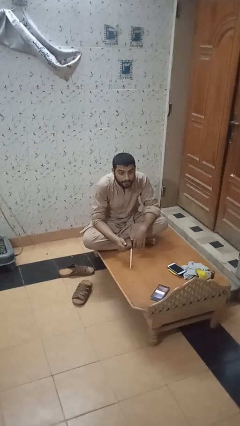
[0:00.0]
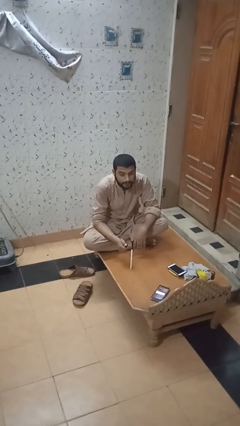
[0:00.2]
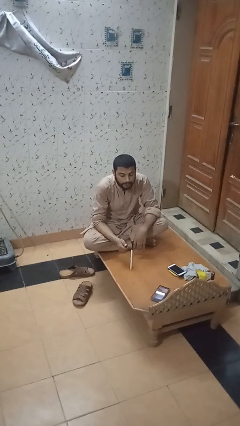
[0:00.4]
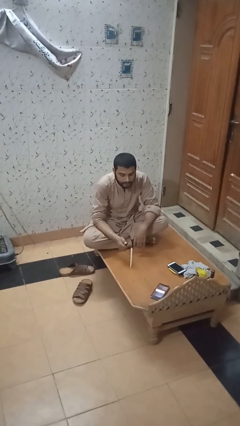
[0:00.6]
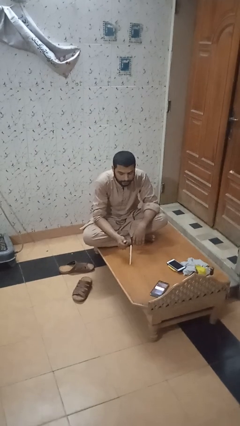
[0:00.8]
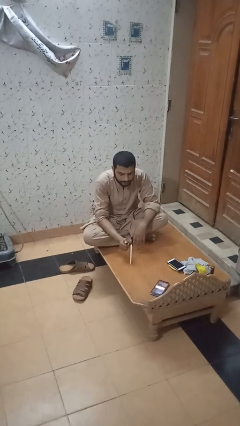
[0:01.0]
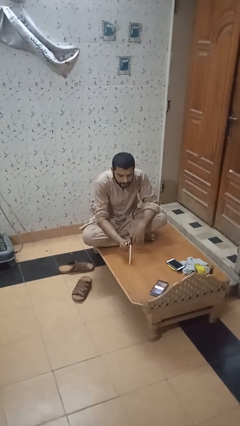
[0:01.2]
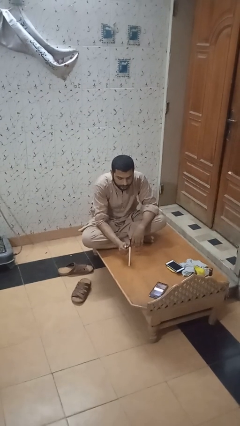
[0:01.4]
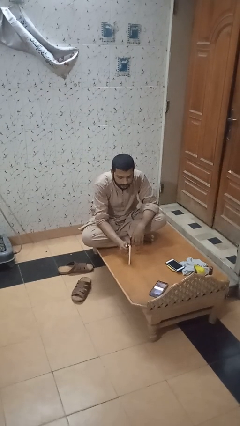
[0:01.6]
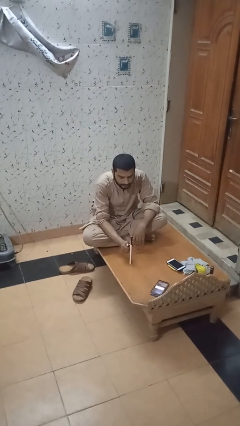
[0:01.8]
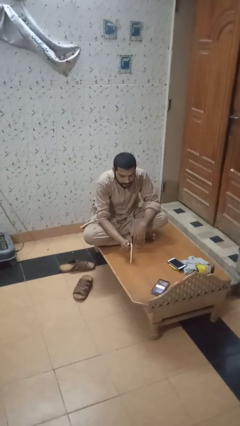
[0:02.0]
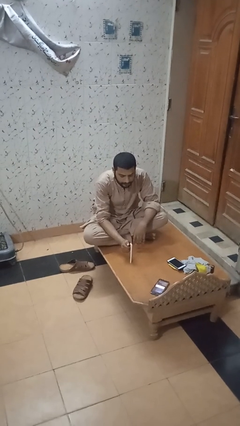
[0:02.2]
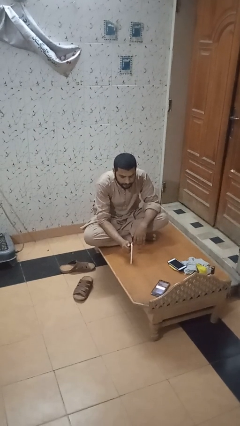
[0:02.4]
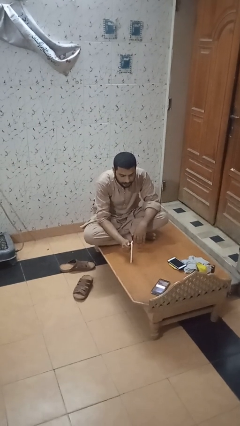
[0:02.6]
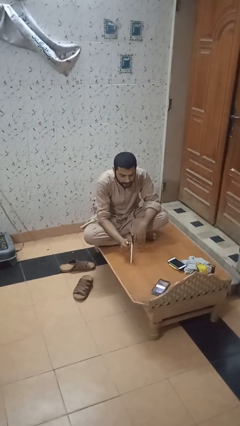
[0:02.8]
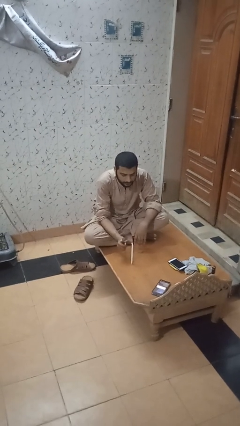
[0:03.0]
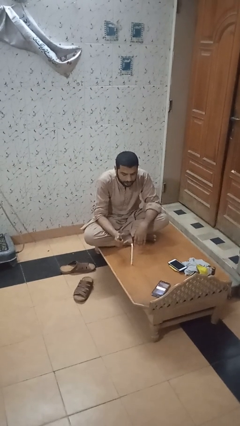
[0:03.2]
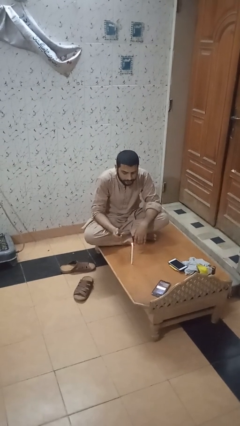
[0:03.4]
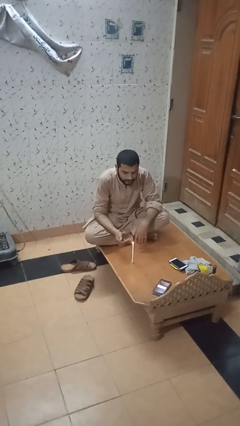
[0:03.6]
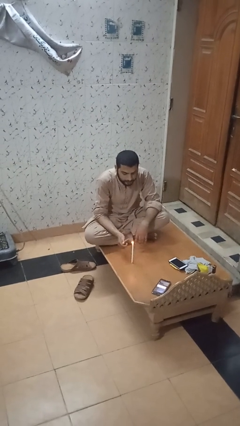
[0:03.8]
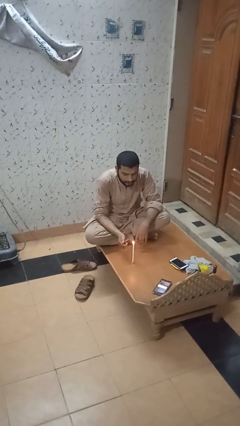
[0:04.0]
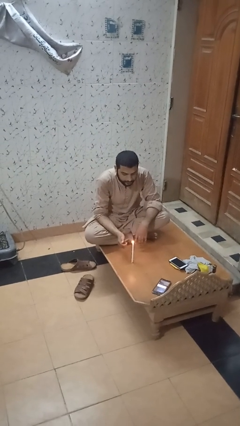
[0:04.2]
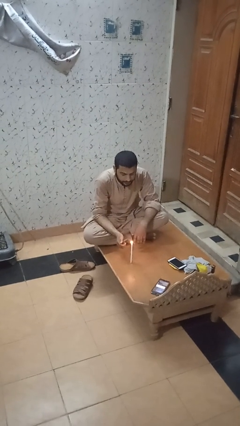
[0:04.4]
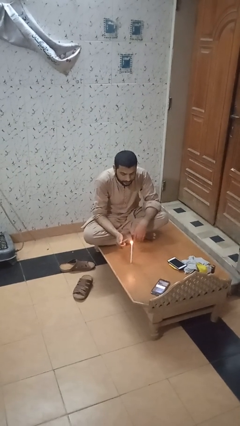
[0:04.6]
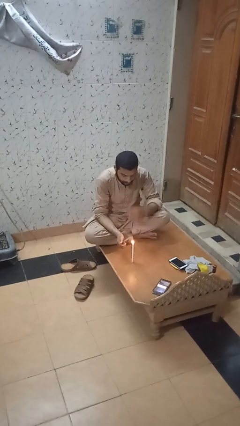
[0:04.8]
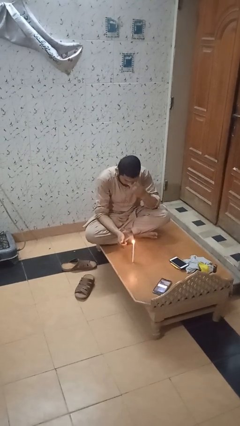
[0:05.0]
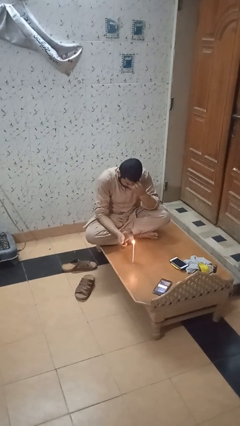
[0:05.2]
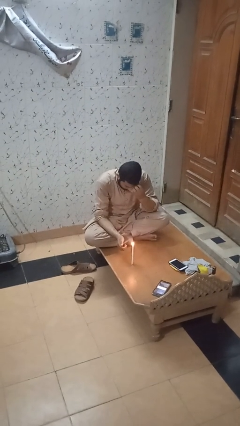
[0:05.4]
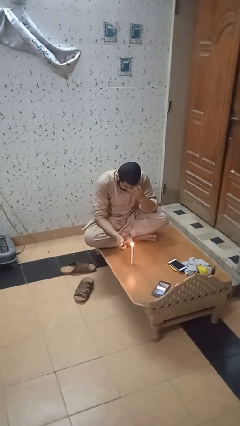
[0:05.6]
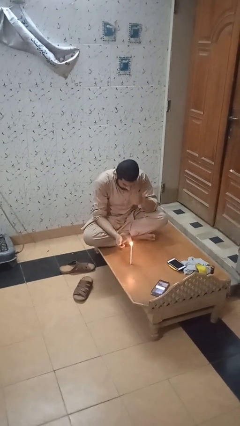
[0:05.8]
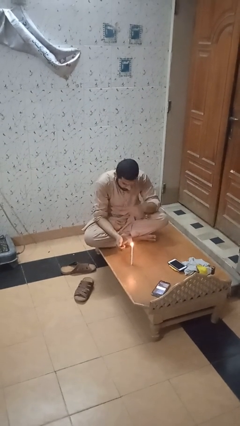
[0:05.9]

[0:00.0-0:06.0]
person lights candle

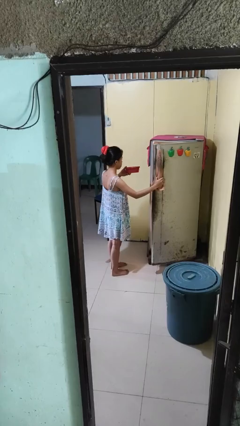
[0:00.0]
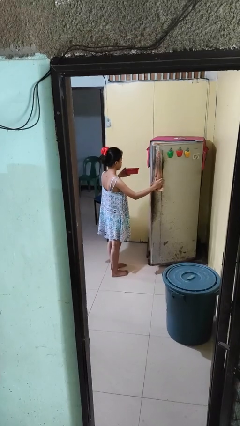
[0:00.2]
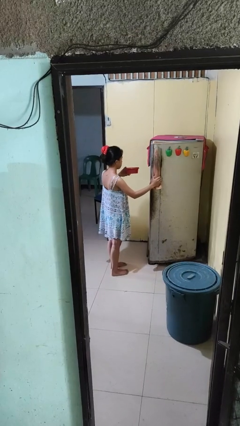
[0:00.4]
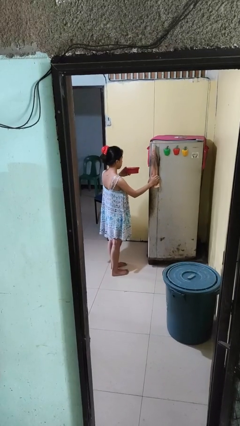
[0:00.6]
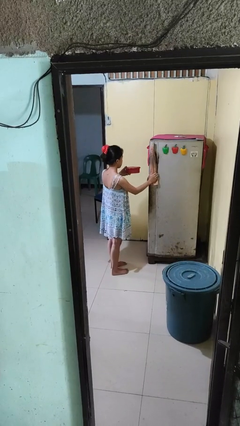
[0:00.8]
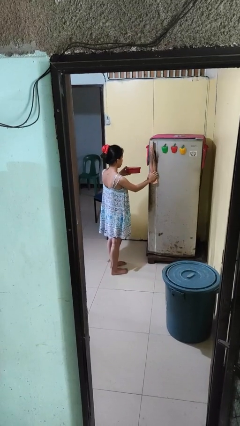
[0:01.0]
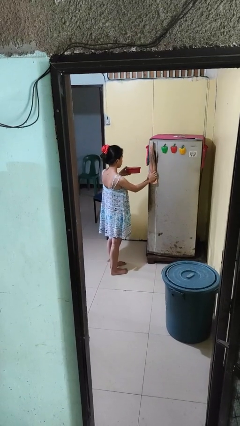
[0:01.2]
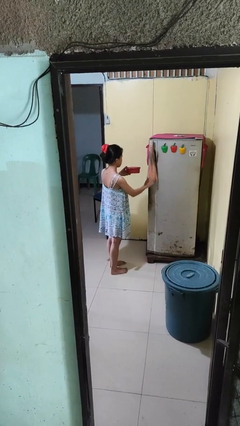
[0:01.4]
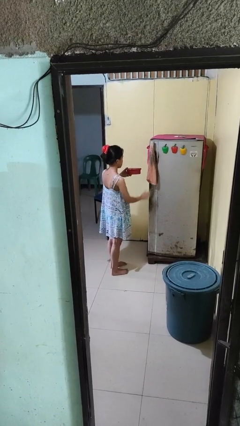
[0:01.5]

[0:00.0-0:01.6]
person closes refrigerator

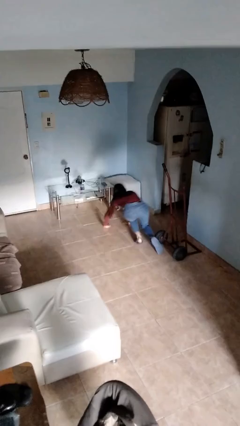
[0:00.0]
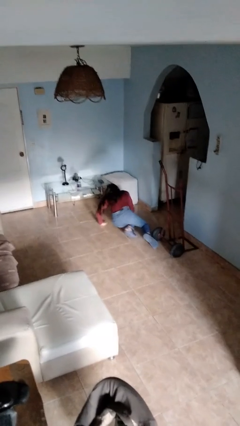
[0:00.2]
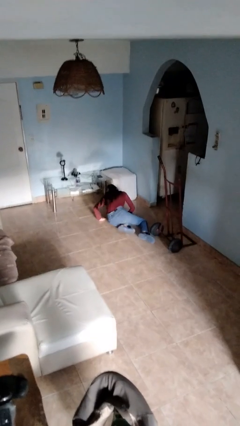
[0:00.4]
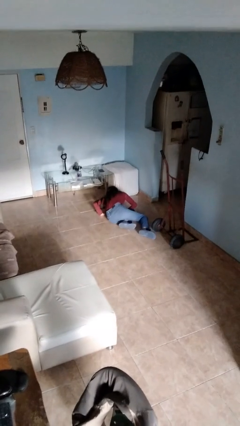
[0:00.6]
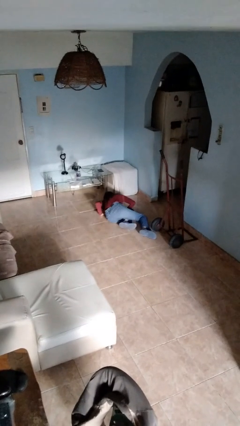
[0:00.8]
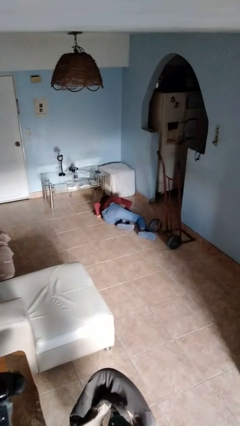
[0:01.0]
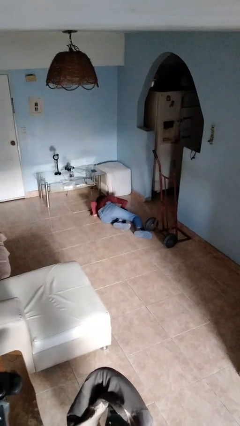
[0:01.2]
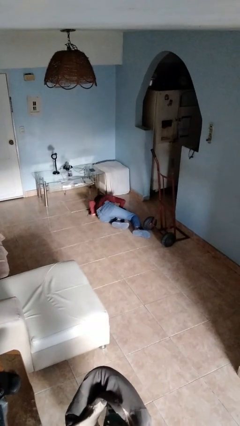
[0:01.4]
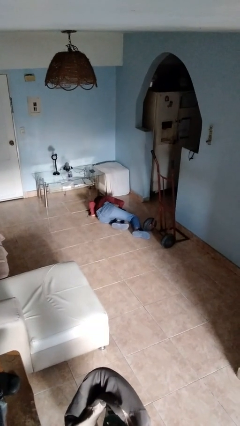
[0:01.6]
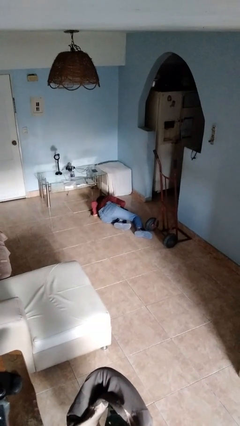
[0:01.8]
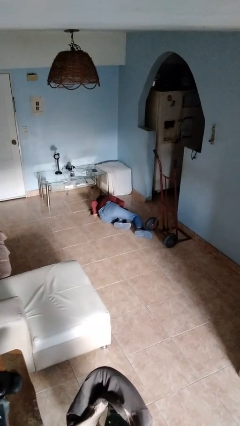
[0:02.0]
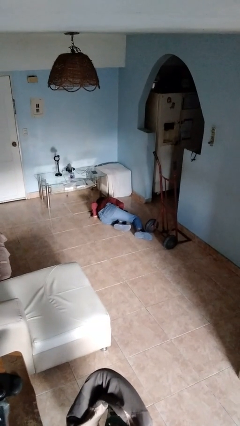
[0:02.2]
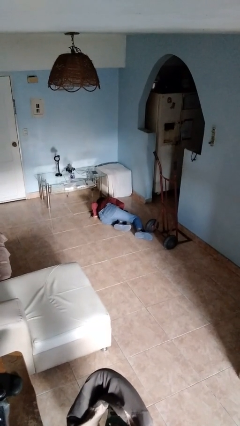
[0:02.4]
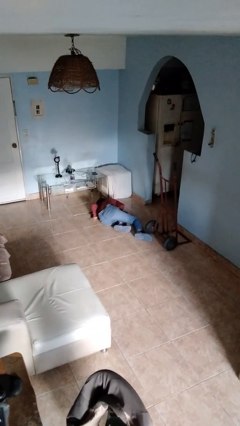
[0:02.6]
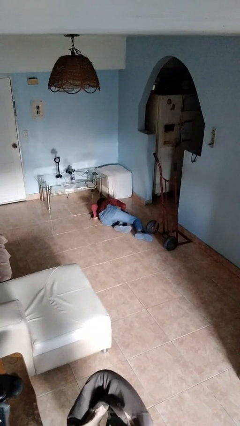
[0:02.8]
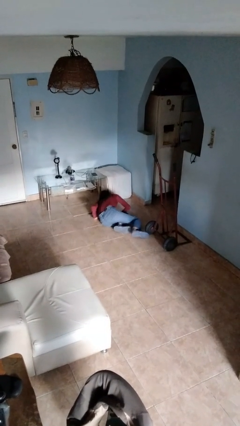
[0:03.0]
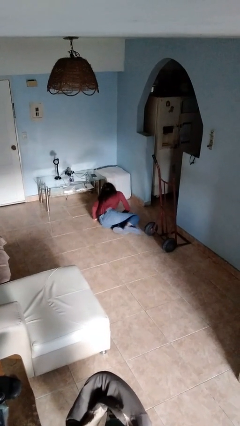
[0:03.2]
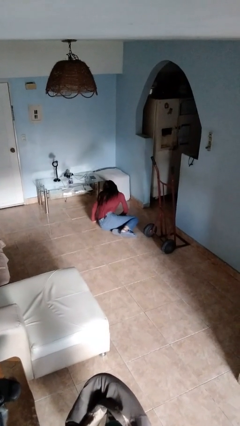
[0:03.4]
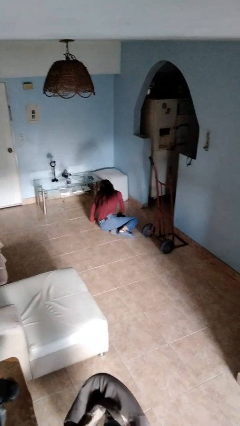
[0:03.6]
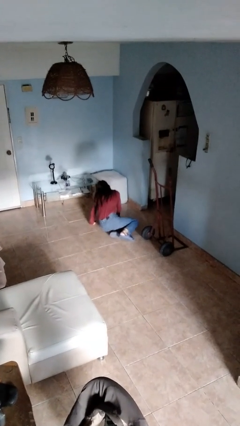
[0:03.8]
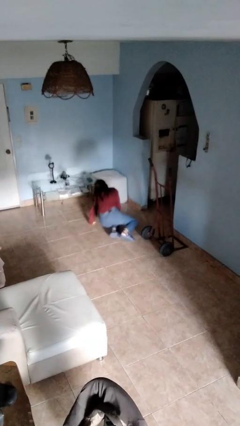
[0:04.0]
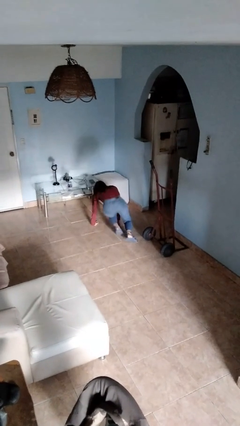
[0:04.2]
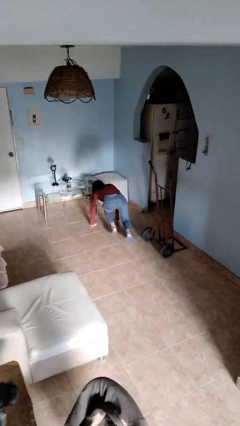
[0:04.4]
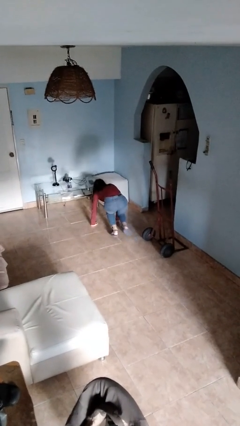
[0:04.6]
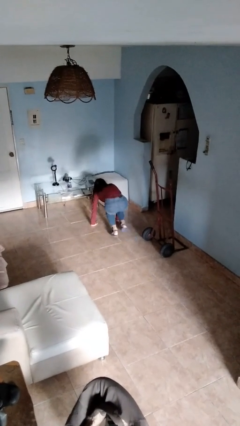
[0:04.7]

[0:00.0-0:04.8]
person lies down on floor

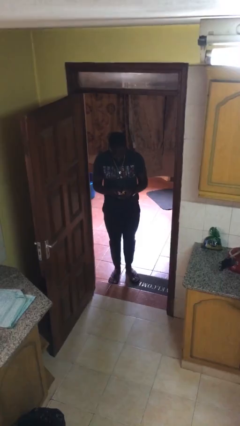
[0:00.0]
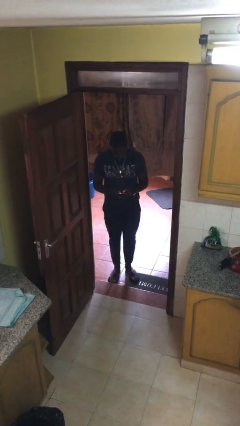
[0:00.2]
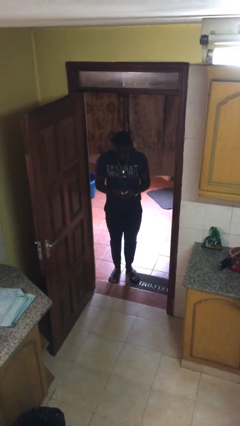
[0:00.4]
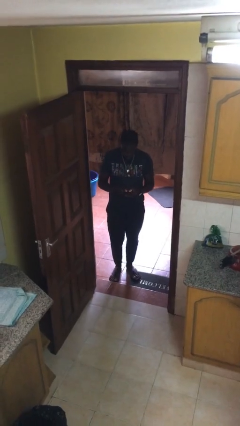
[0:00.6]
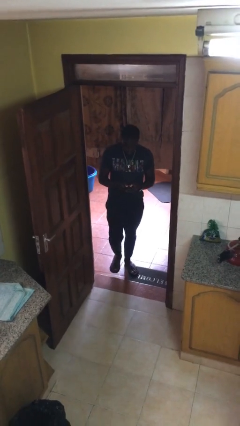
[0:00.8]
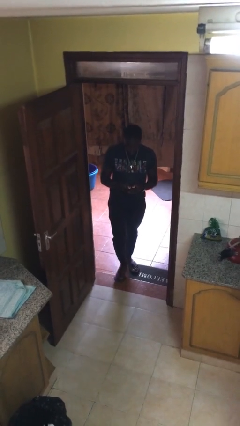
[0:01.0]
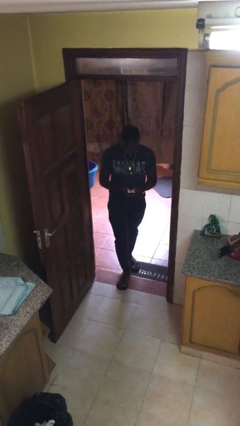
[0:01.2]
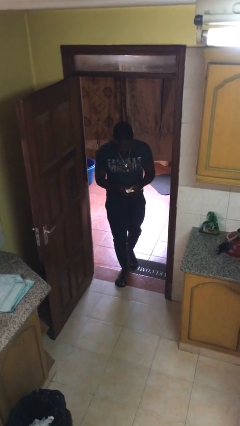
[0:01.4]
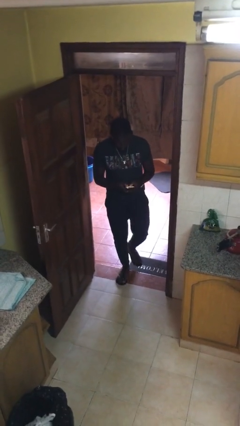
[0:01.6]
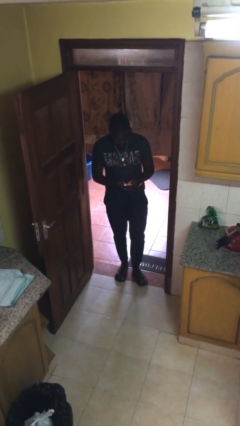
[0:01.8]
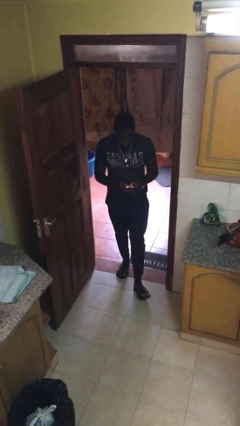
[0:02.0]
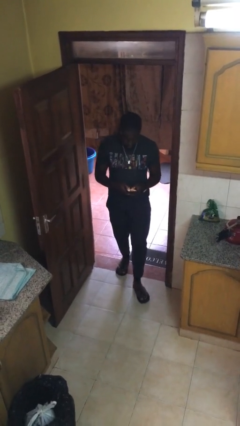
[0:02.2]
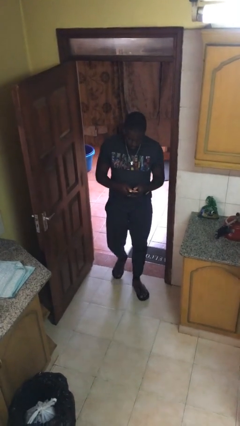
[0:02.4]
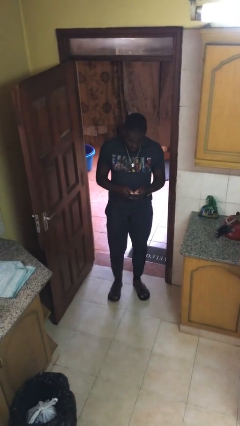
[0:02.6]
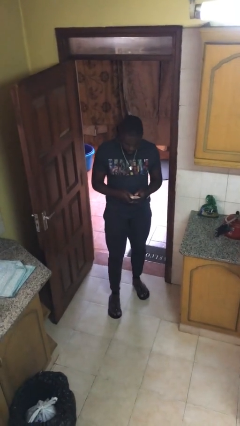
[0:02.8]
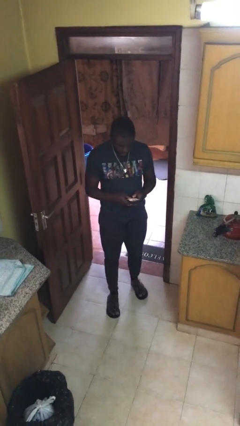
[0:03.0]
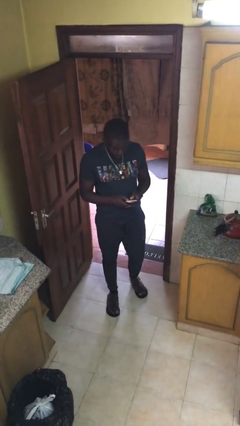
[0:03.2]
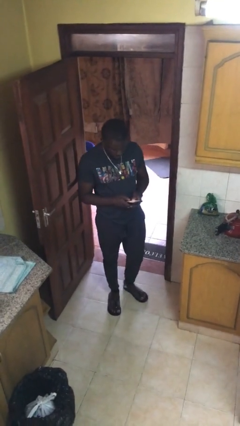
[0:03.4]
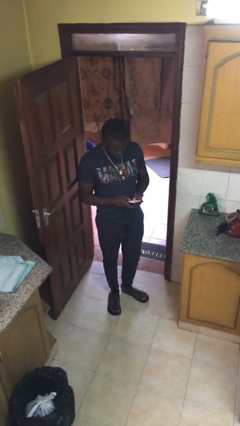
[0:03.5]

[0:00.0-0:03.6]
person enters scene through structure

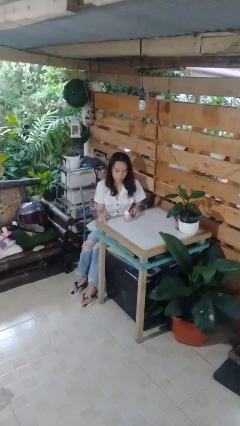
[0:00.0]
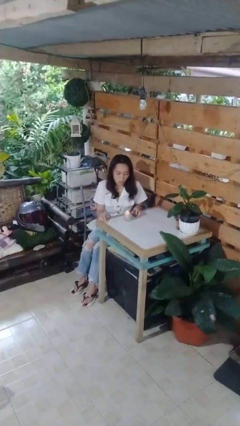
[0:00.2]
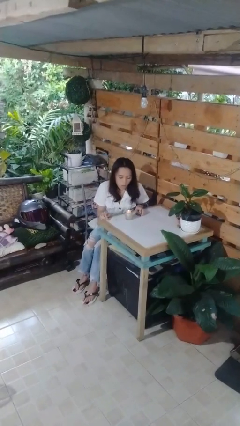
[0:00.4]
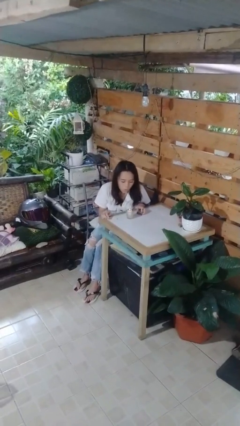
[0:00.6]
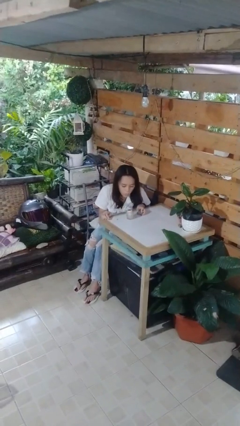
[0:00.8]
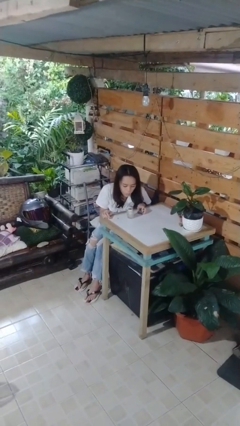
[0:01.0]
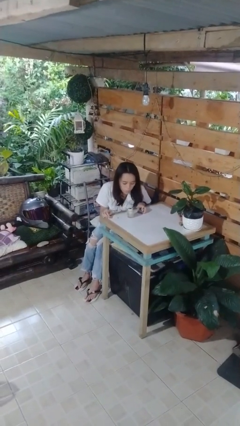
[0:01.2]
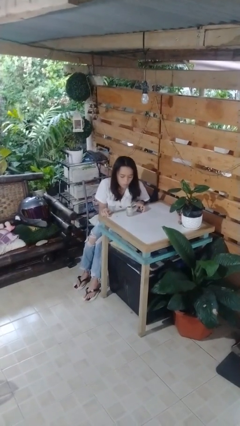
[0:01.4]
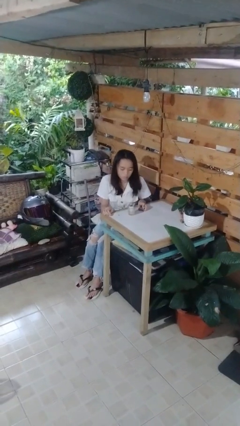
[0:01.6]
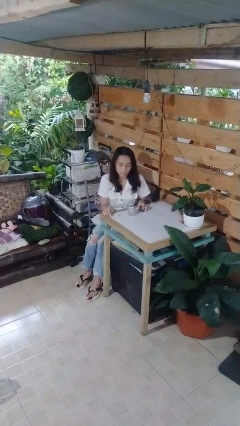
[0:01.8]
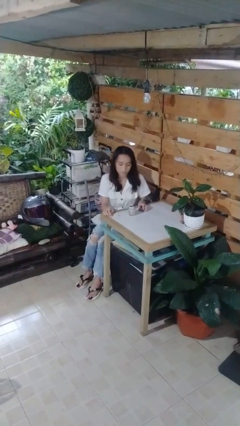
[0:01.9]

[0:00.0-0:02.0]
person extinguishes candle
